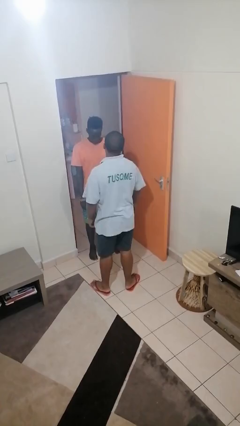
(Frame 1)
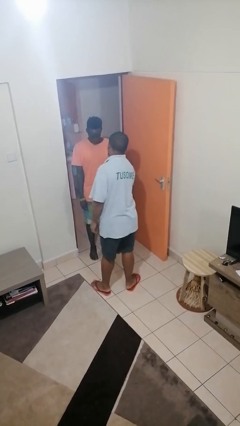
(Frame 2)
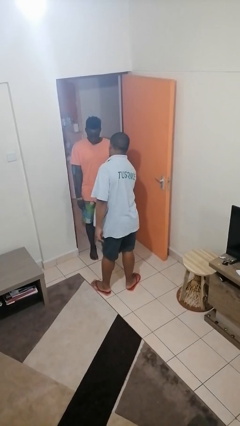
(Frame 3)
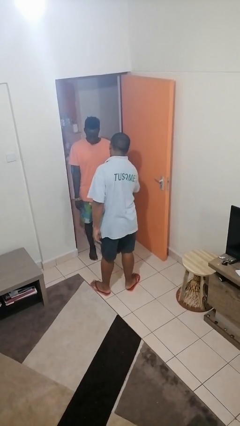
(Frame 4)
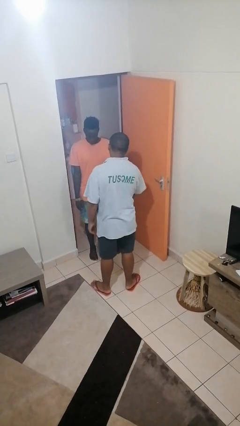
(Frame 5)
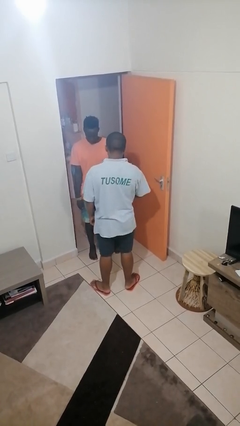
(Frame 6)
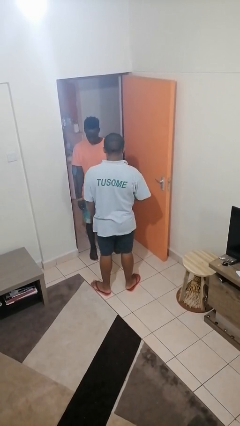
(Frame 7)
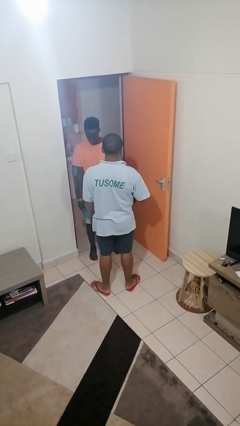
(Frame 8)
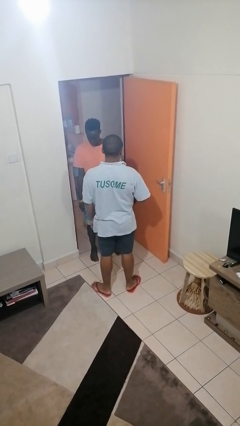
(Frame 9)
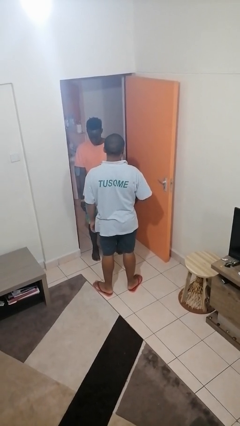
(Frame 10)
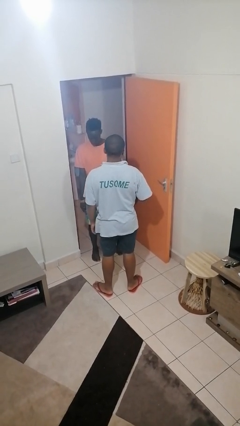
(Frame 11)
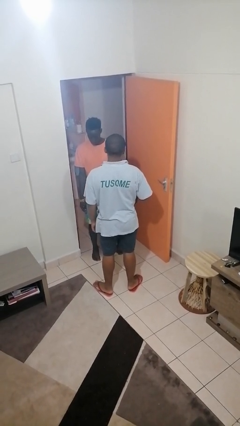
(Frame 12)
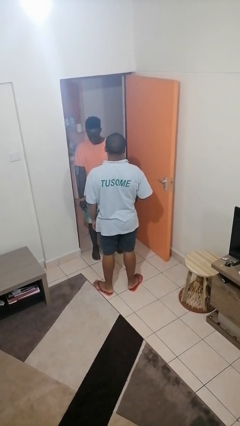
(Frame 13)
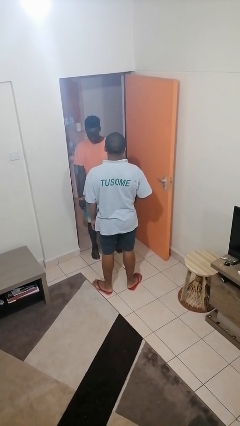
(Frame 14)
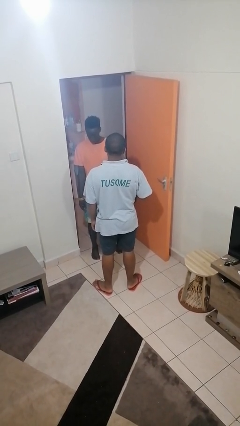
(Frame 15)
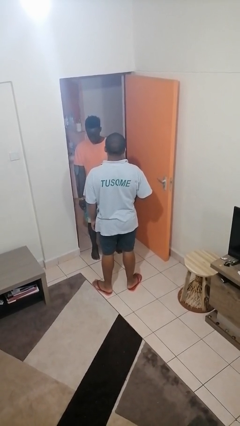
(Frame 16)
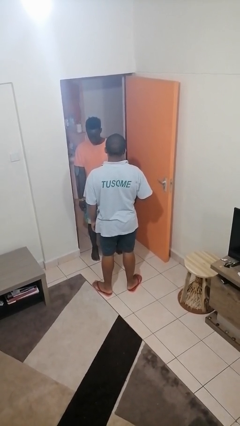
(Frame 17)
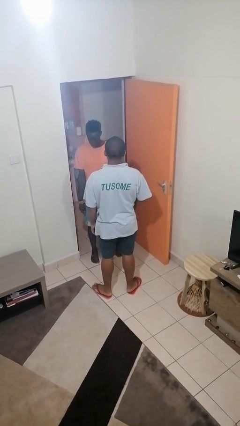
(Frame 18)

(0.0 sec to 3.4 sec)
person grabs person by forearm

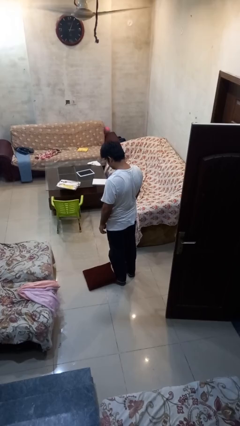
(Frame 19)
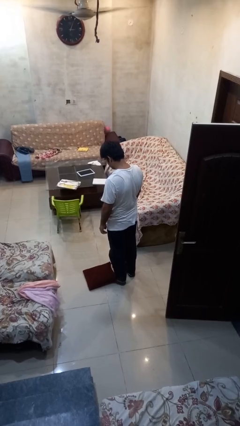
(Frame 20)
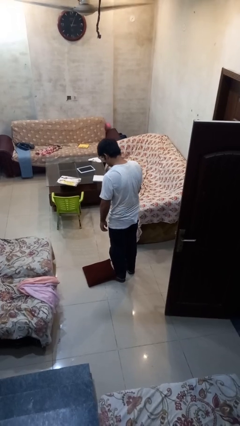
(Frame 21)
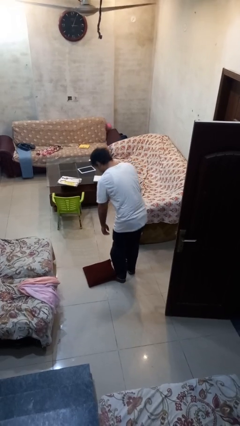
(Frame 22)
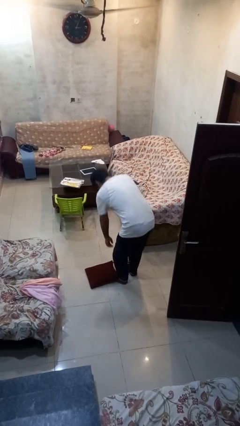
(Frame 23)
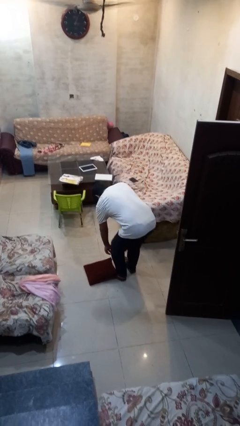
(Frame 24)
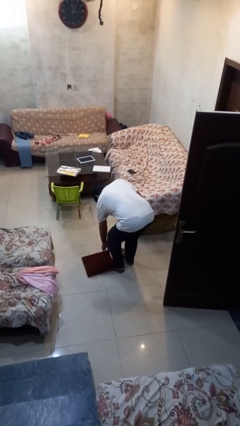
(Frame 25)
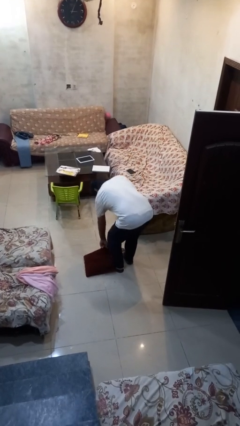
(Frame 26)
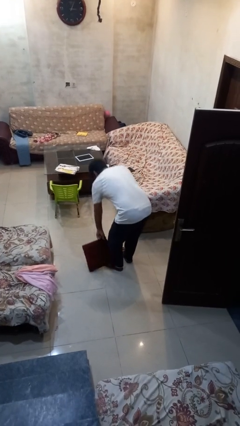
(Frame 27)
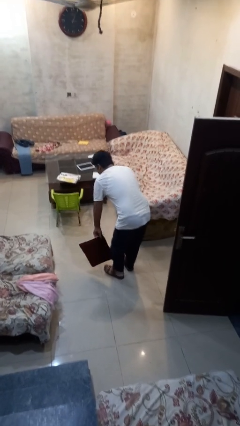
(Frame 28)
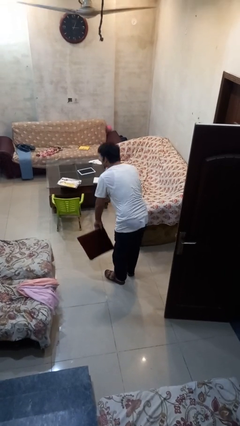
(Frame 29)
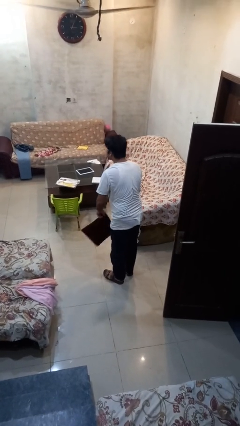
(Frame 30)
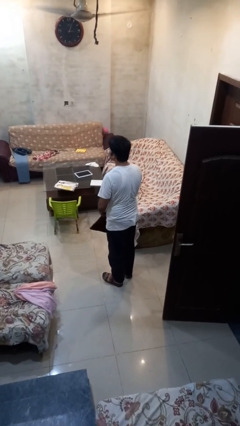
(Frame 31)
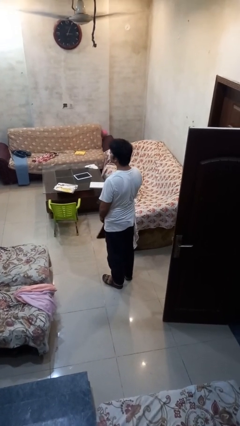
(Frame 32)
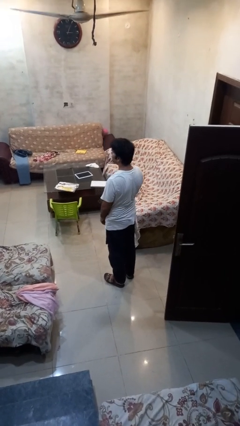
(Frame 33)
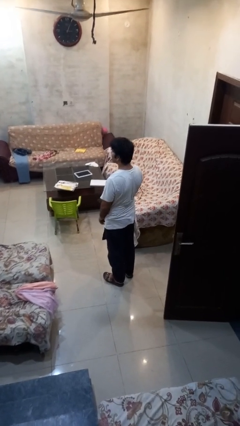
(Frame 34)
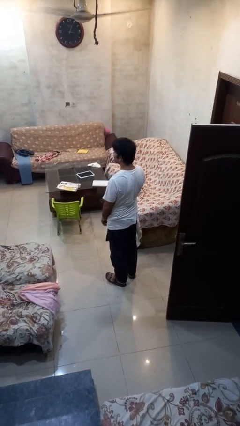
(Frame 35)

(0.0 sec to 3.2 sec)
person picks up object from floor

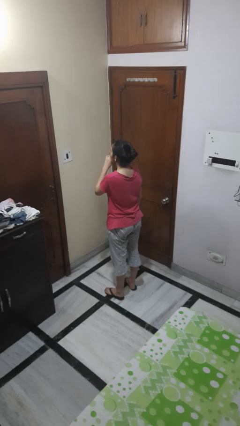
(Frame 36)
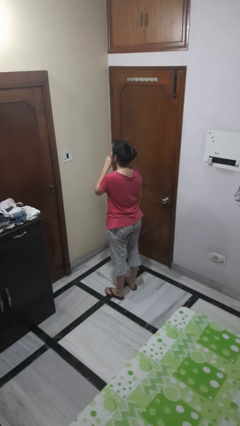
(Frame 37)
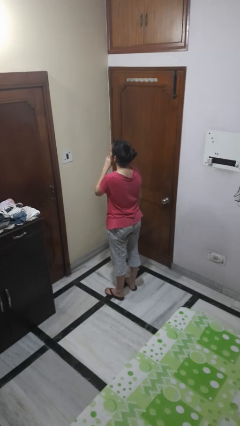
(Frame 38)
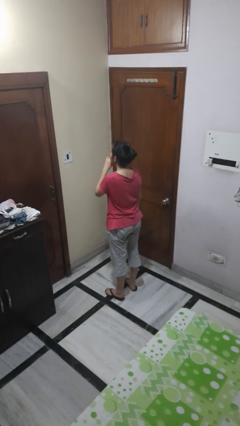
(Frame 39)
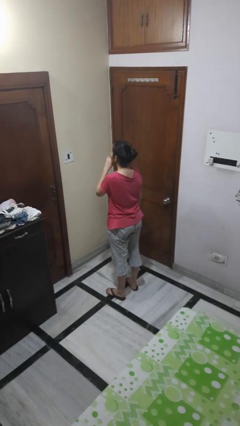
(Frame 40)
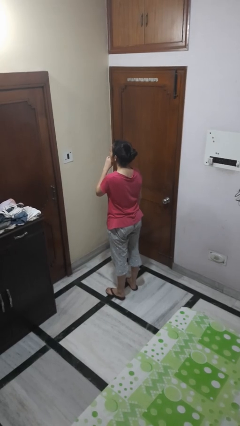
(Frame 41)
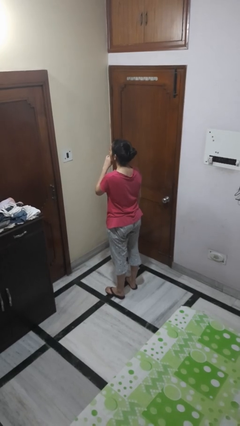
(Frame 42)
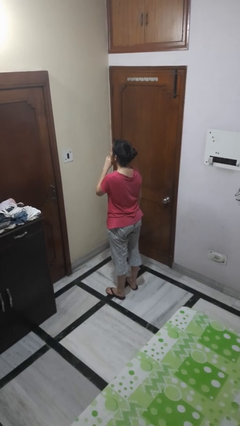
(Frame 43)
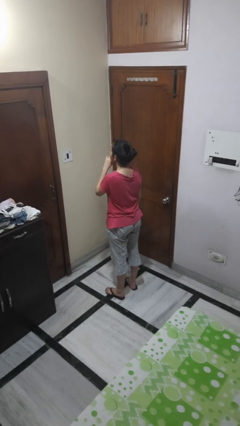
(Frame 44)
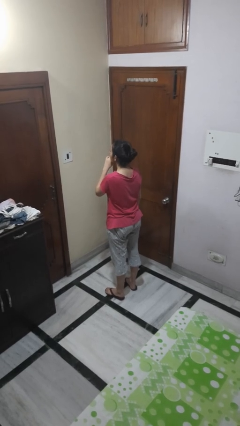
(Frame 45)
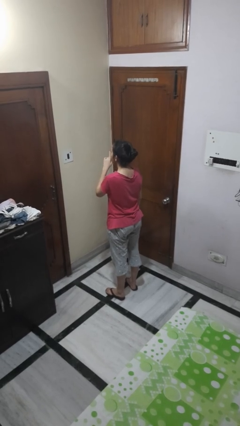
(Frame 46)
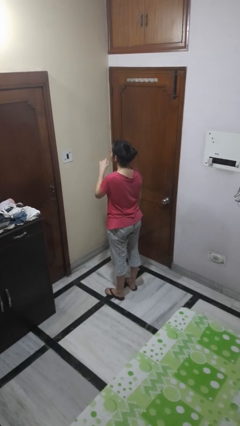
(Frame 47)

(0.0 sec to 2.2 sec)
person gestures be quiet

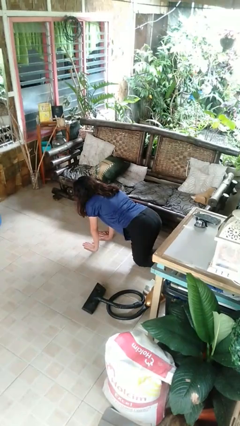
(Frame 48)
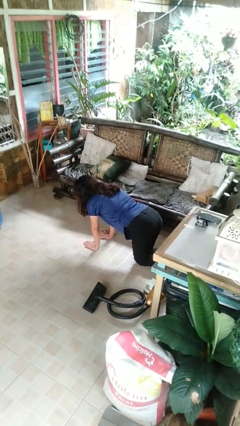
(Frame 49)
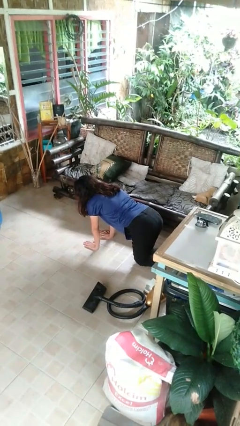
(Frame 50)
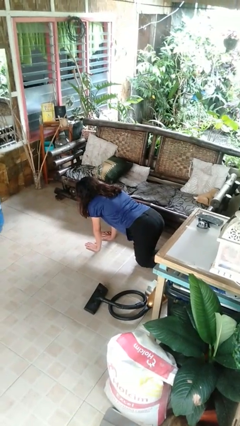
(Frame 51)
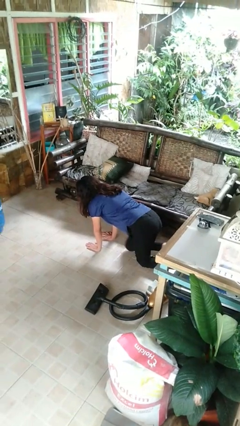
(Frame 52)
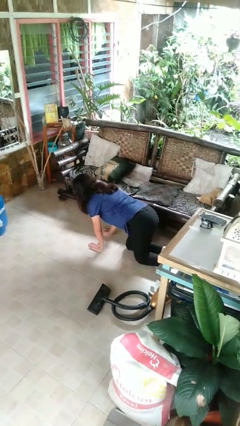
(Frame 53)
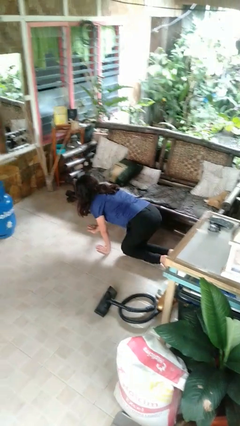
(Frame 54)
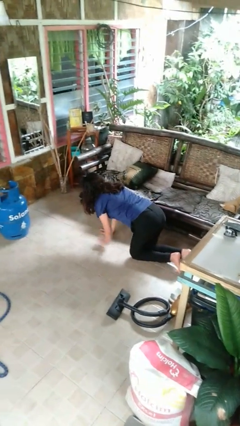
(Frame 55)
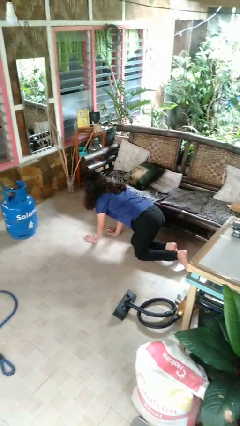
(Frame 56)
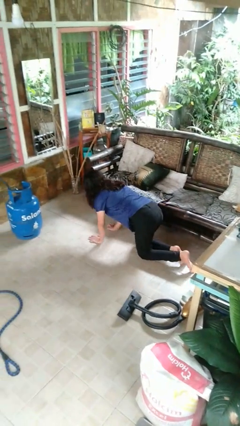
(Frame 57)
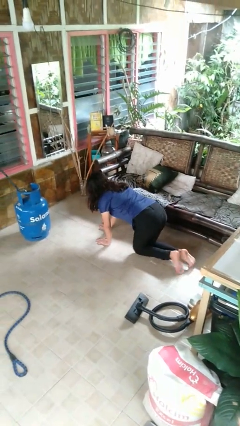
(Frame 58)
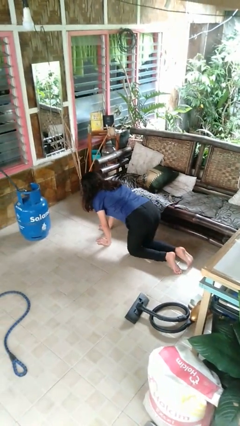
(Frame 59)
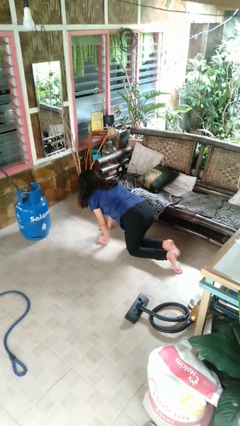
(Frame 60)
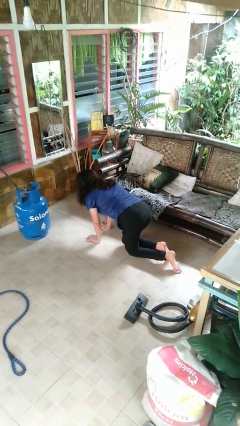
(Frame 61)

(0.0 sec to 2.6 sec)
person crawls

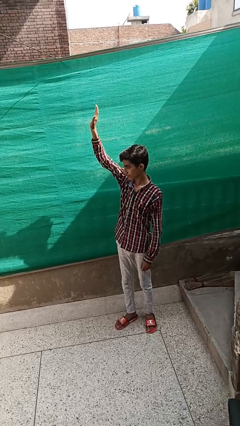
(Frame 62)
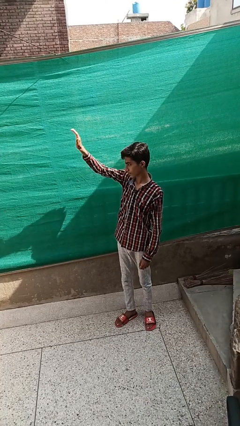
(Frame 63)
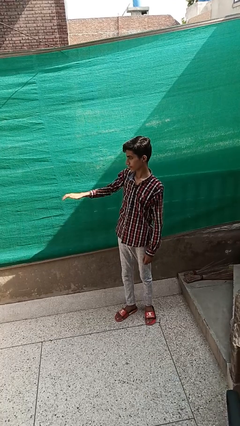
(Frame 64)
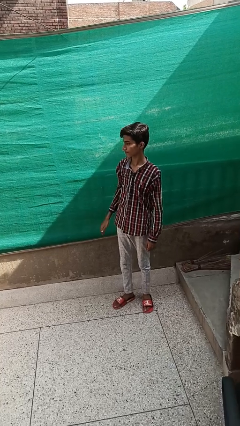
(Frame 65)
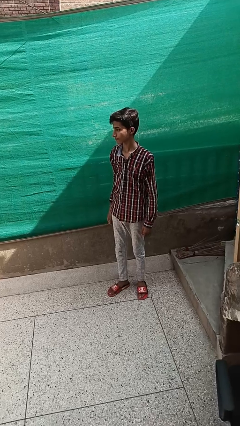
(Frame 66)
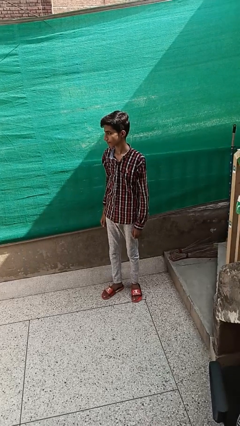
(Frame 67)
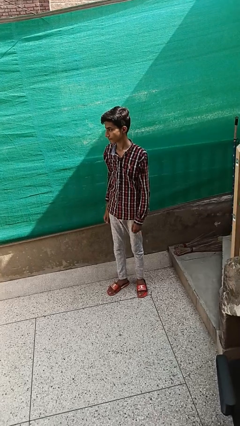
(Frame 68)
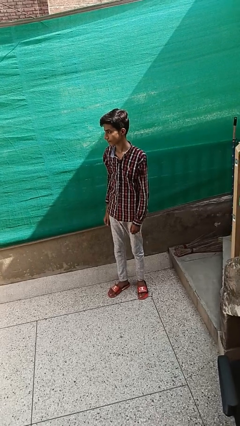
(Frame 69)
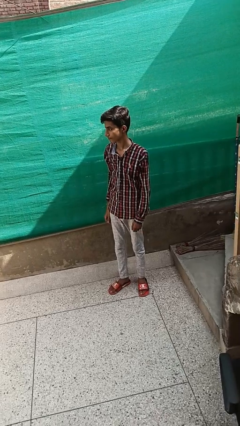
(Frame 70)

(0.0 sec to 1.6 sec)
person gestures lower hand

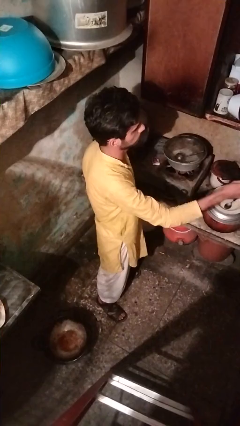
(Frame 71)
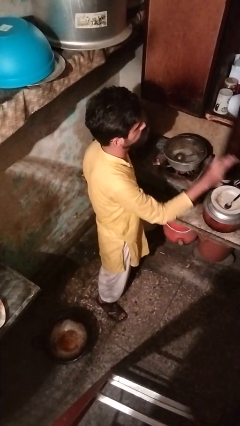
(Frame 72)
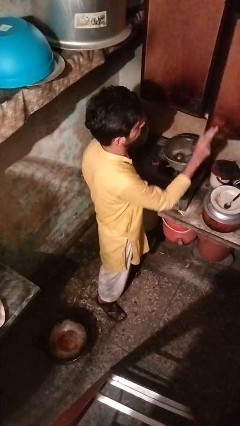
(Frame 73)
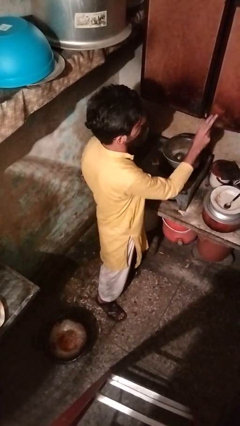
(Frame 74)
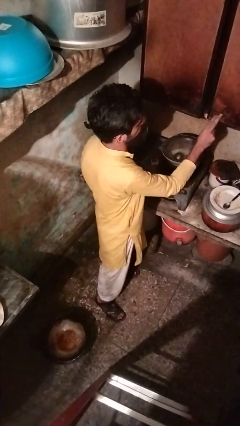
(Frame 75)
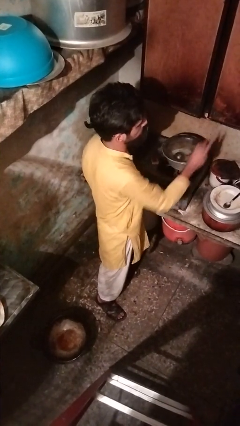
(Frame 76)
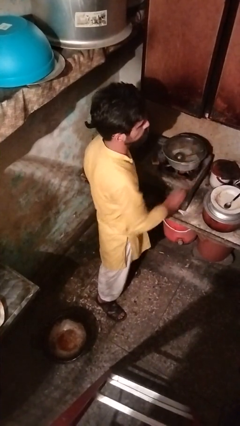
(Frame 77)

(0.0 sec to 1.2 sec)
person closes cabinet

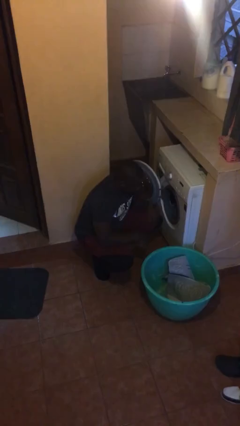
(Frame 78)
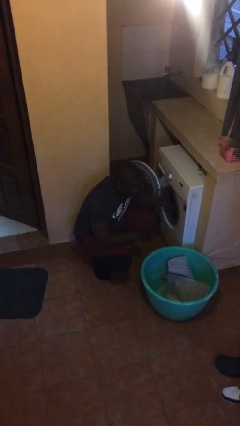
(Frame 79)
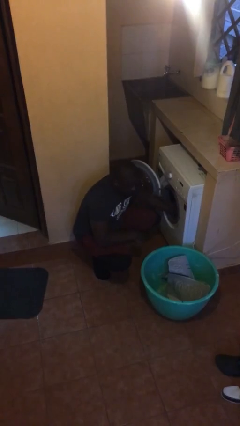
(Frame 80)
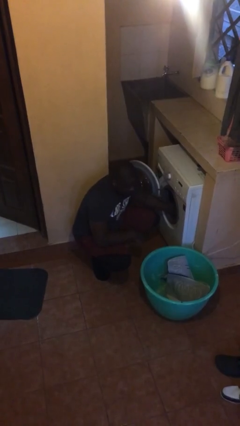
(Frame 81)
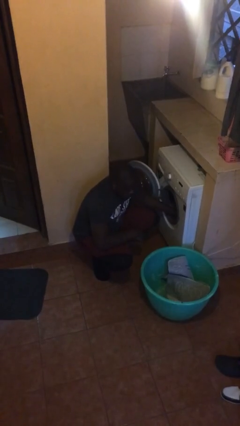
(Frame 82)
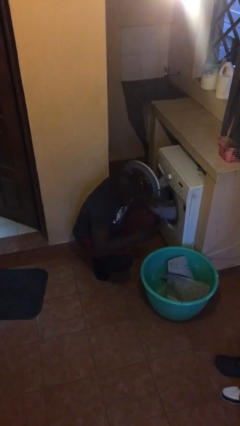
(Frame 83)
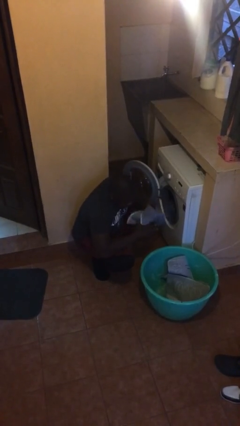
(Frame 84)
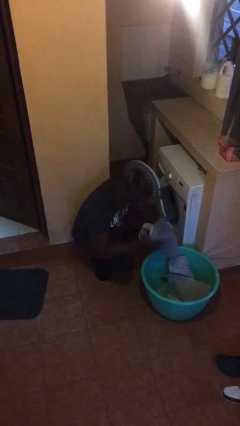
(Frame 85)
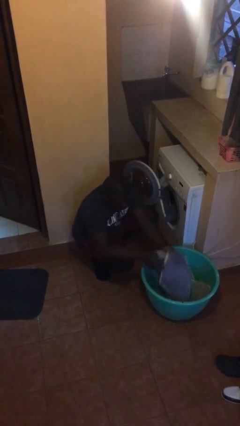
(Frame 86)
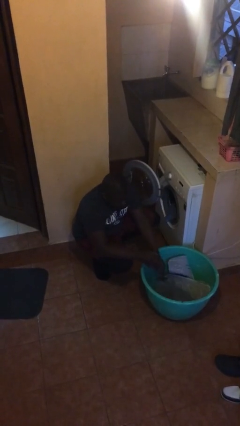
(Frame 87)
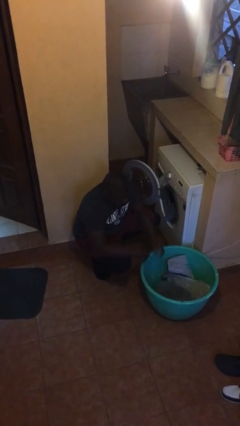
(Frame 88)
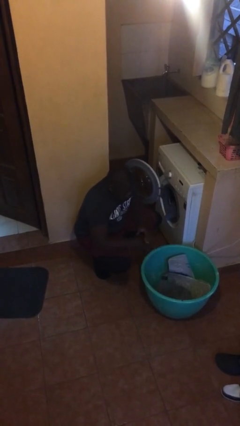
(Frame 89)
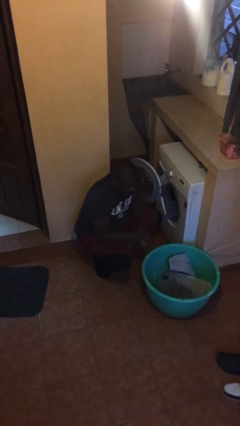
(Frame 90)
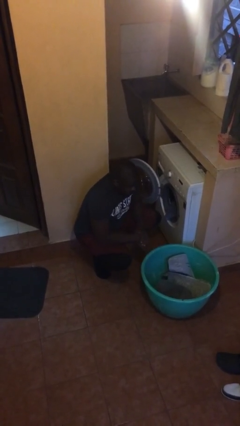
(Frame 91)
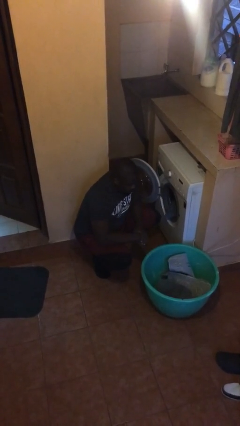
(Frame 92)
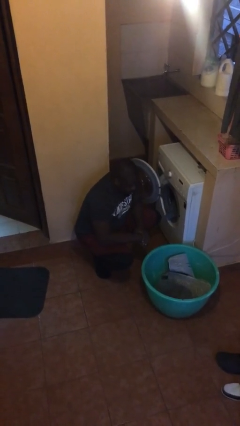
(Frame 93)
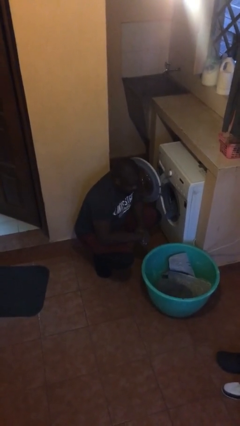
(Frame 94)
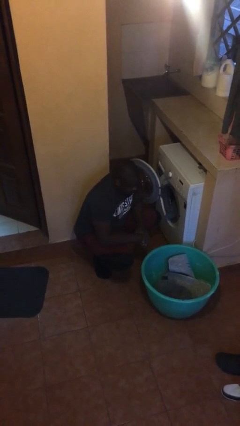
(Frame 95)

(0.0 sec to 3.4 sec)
person unloads clotheswasher
